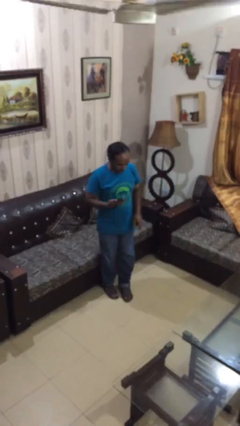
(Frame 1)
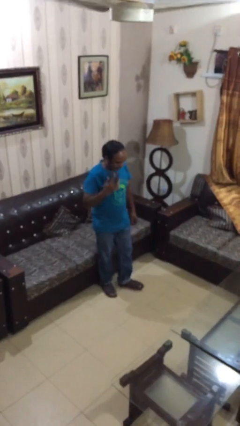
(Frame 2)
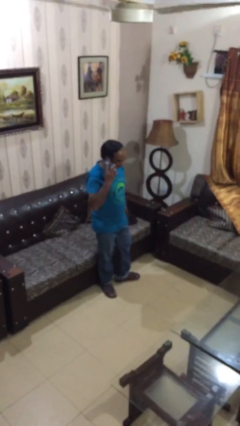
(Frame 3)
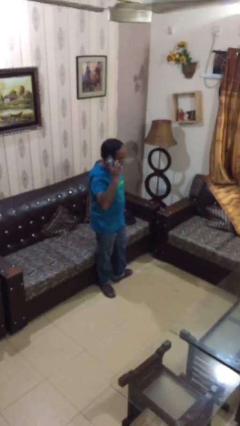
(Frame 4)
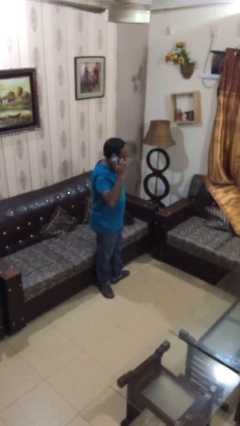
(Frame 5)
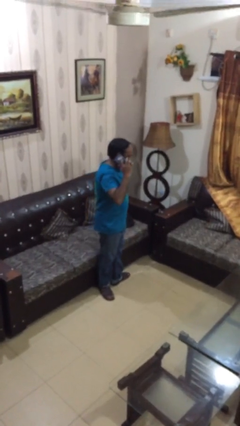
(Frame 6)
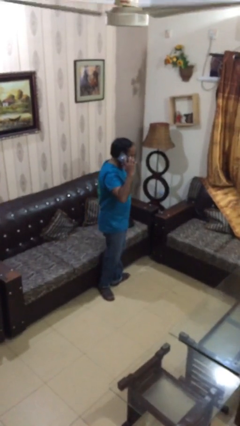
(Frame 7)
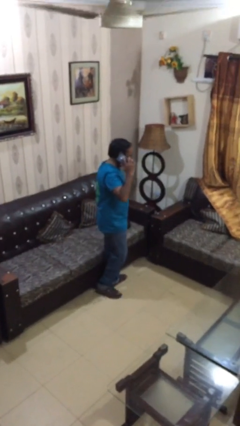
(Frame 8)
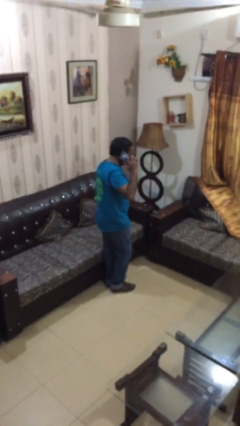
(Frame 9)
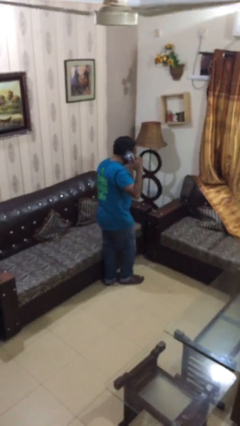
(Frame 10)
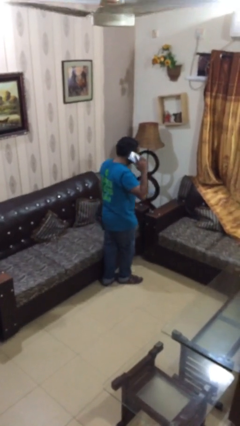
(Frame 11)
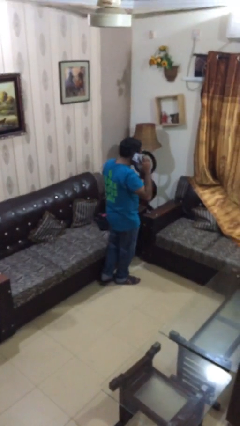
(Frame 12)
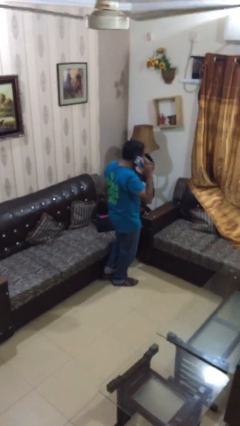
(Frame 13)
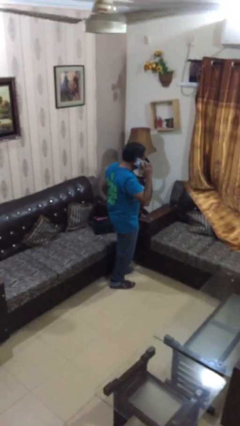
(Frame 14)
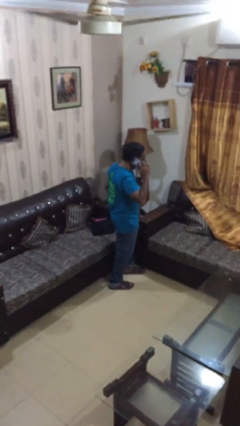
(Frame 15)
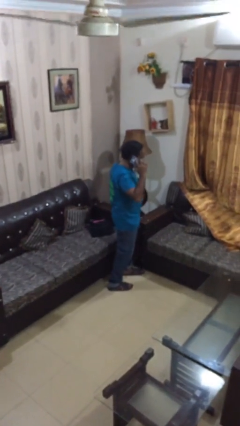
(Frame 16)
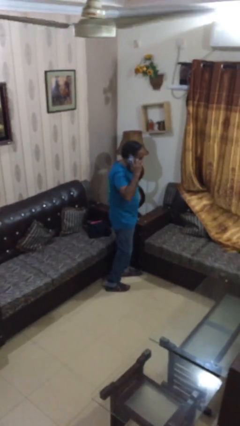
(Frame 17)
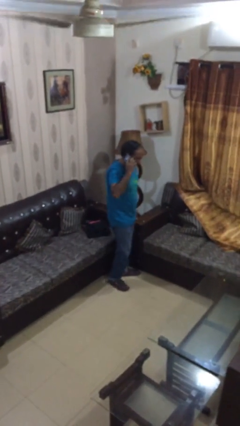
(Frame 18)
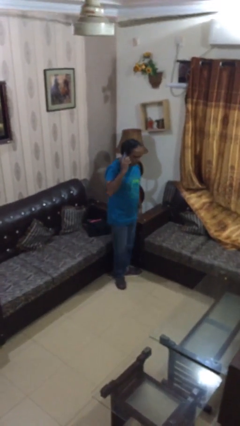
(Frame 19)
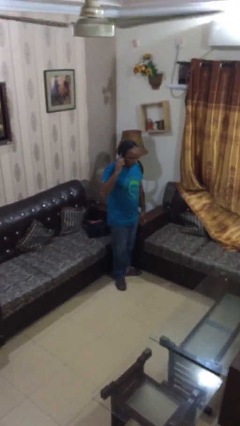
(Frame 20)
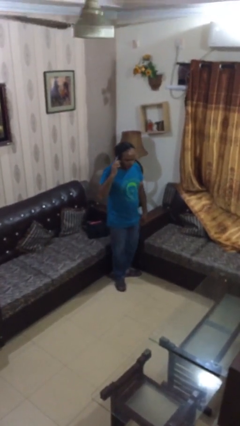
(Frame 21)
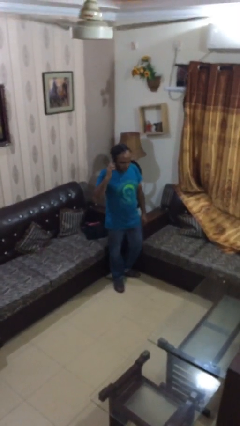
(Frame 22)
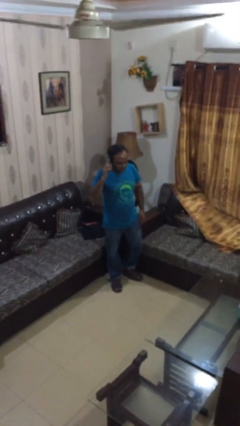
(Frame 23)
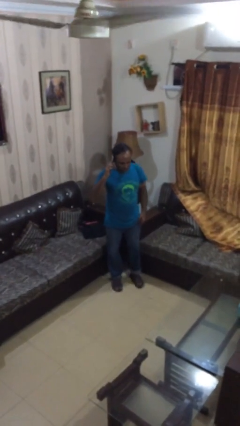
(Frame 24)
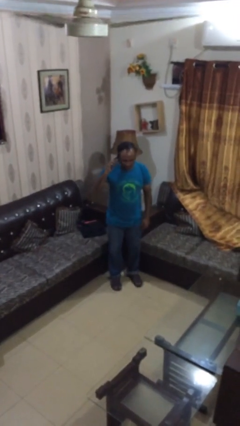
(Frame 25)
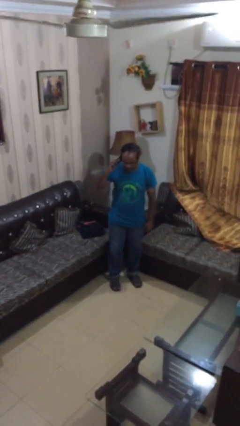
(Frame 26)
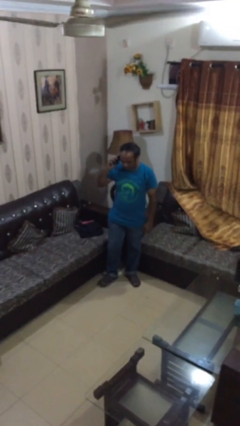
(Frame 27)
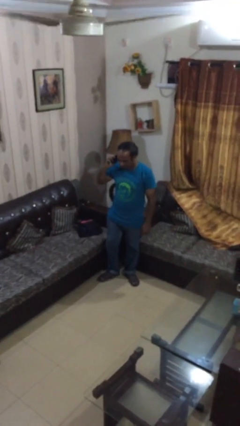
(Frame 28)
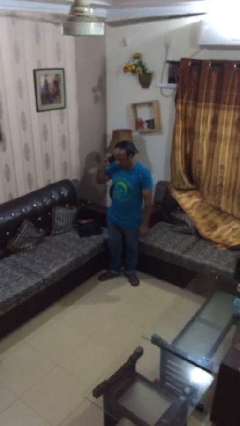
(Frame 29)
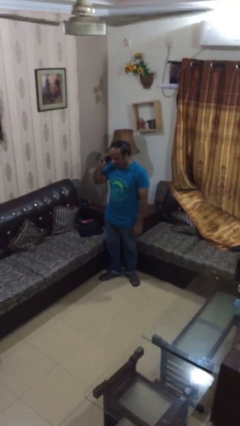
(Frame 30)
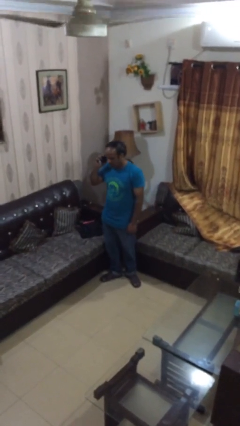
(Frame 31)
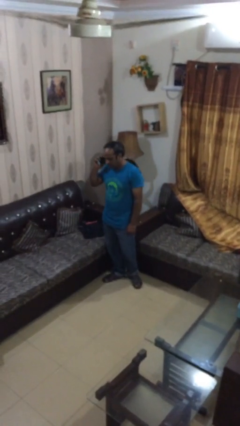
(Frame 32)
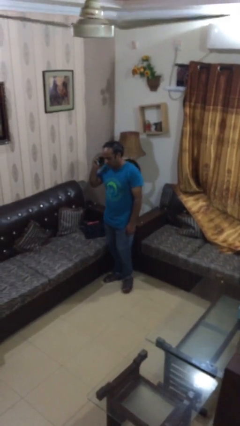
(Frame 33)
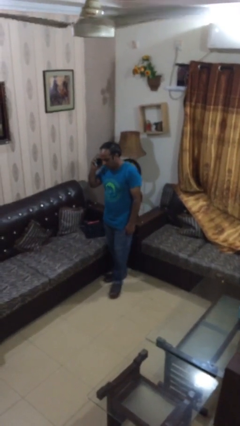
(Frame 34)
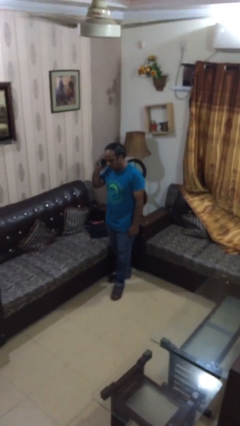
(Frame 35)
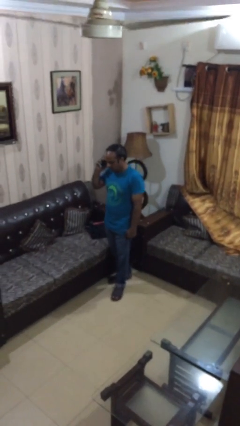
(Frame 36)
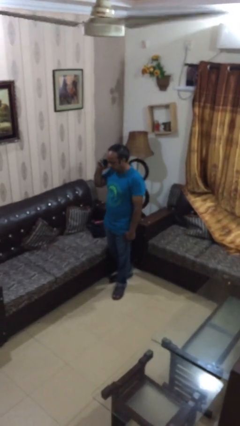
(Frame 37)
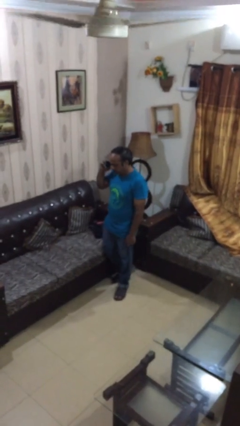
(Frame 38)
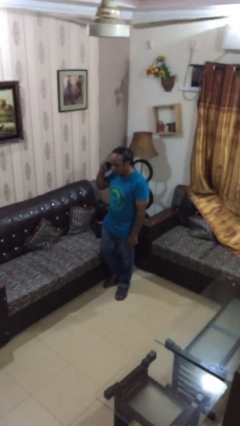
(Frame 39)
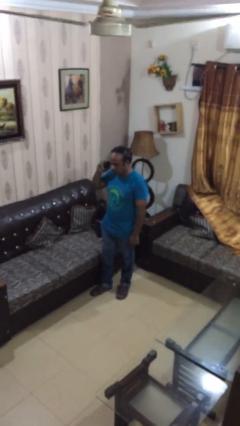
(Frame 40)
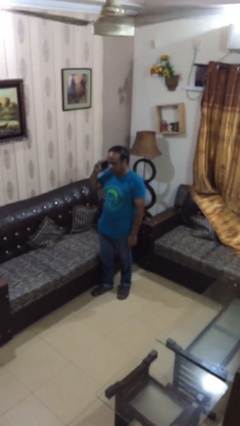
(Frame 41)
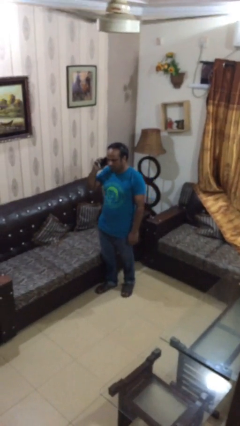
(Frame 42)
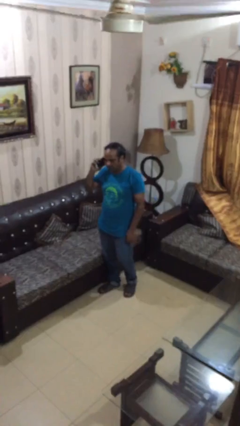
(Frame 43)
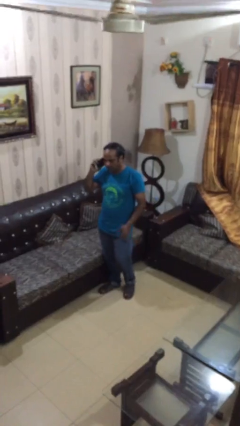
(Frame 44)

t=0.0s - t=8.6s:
person talks on phone

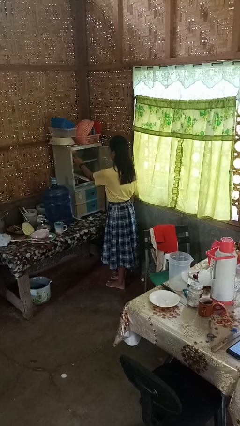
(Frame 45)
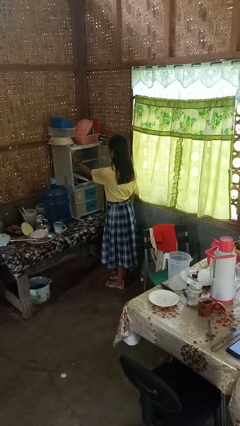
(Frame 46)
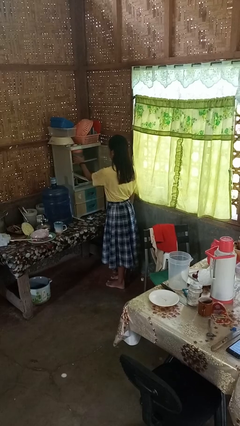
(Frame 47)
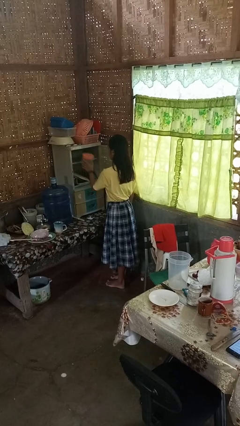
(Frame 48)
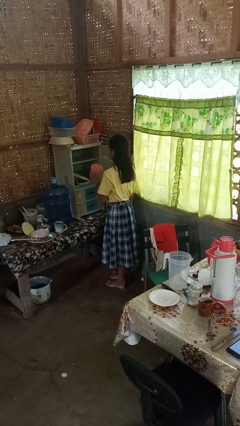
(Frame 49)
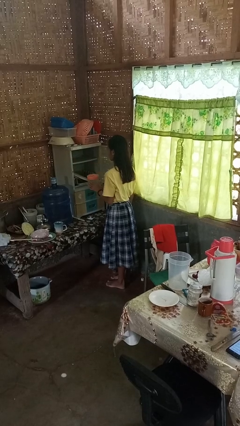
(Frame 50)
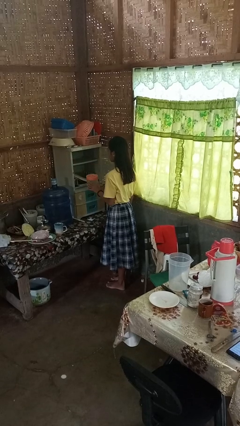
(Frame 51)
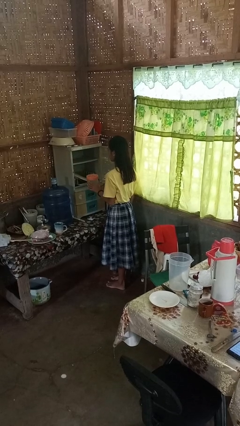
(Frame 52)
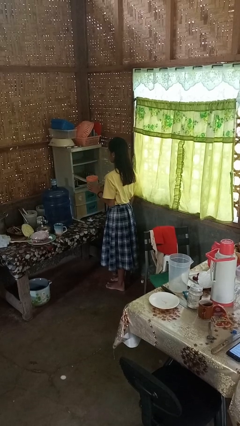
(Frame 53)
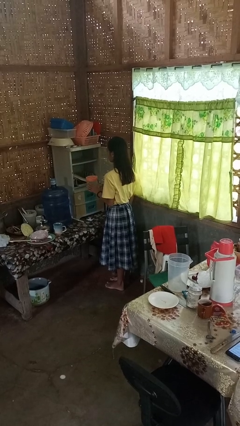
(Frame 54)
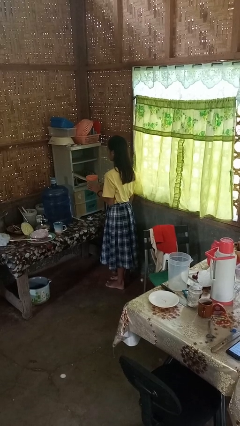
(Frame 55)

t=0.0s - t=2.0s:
person picks up object from cabinet

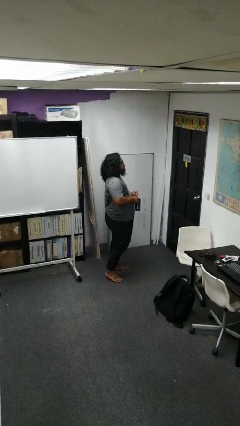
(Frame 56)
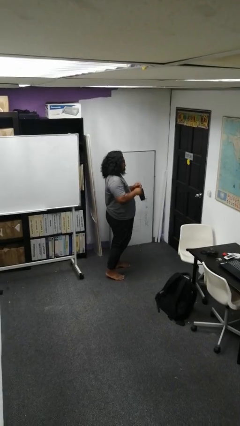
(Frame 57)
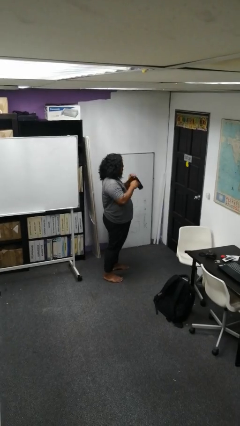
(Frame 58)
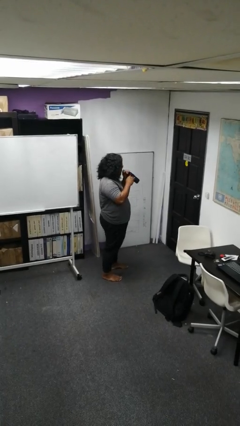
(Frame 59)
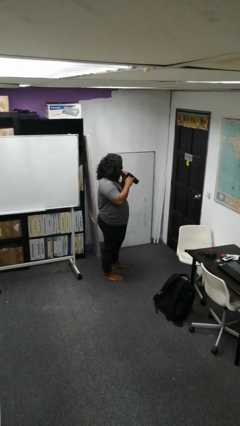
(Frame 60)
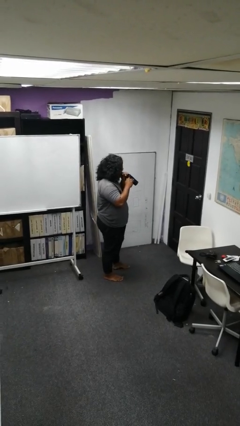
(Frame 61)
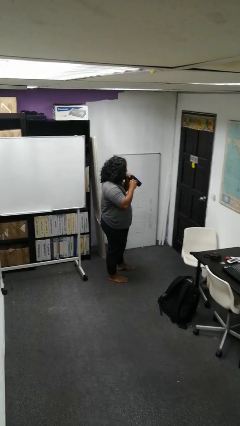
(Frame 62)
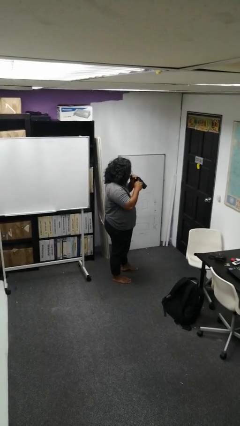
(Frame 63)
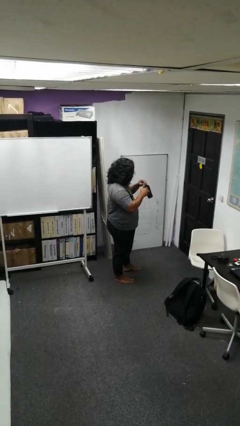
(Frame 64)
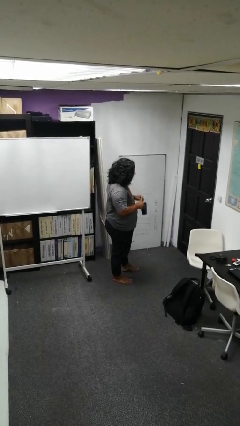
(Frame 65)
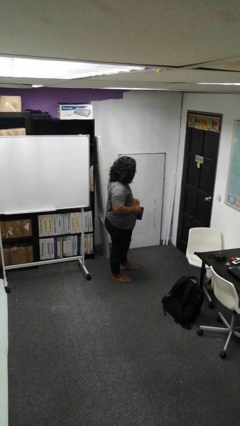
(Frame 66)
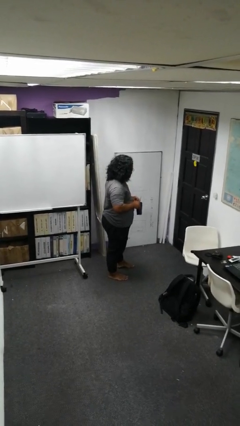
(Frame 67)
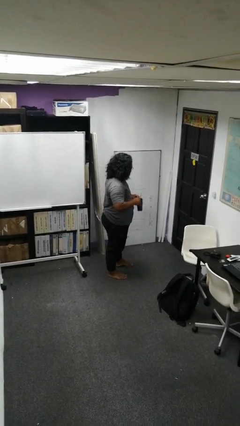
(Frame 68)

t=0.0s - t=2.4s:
person drinks from straw

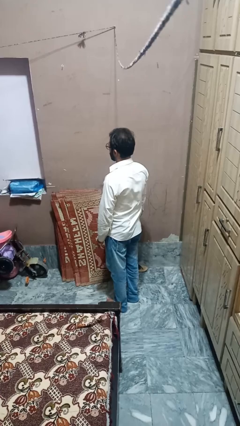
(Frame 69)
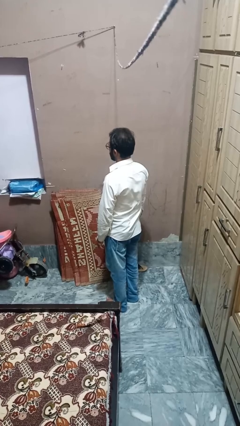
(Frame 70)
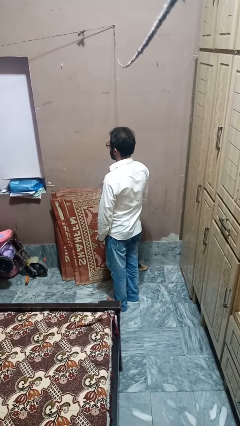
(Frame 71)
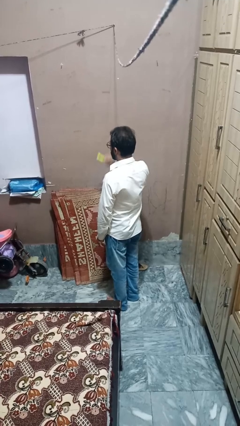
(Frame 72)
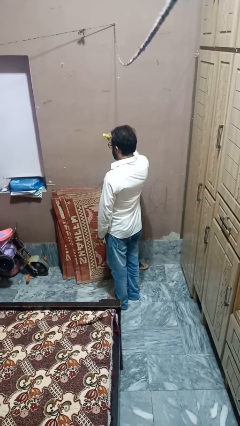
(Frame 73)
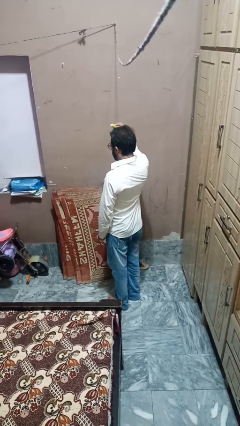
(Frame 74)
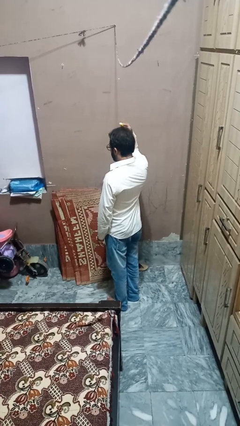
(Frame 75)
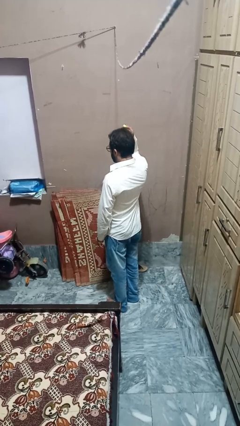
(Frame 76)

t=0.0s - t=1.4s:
person brushes hair

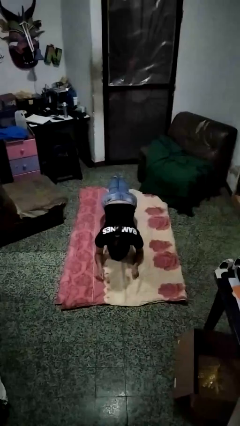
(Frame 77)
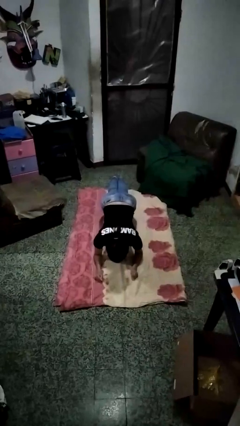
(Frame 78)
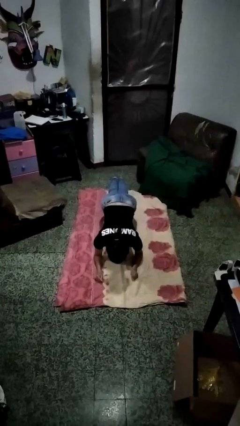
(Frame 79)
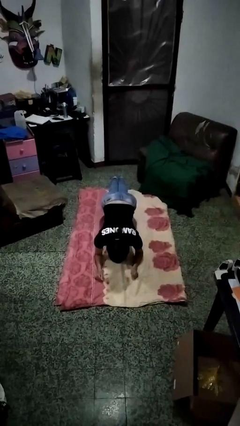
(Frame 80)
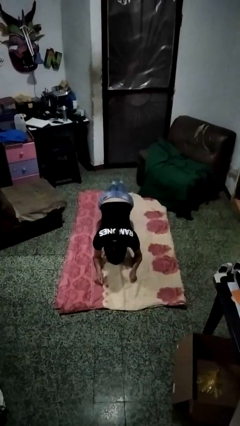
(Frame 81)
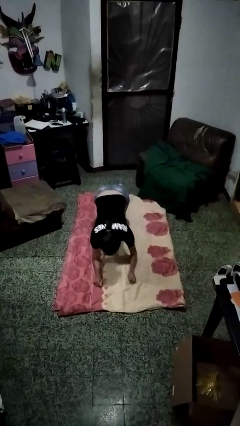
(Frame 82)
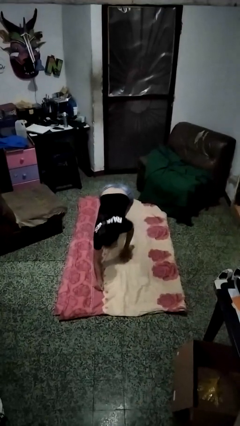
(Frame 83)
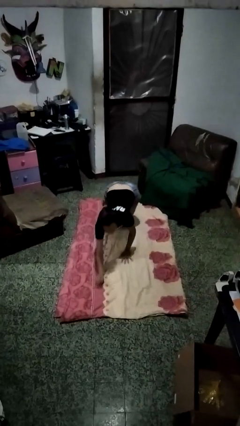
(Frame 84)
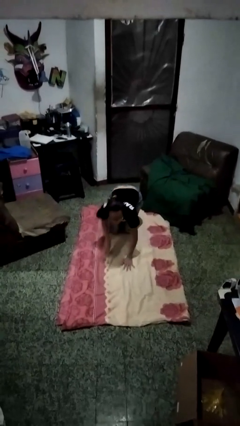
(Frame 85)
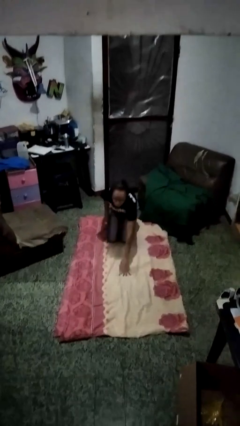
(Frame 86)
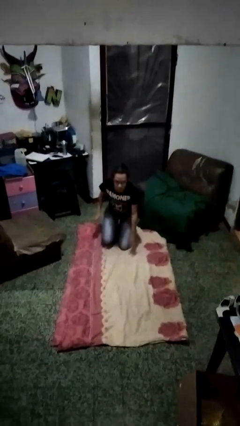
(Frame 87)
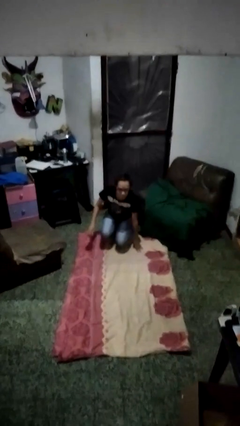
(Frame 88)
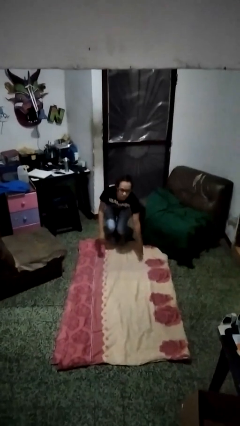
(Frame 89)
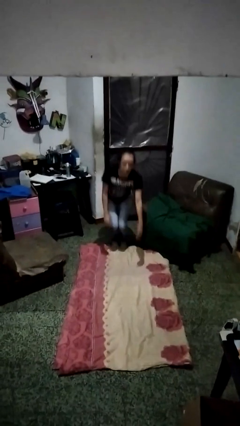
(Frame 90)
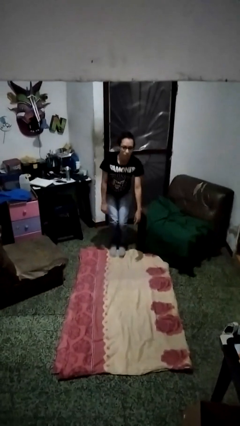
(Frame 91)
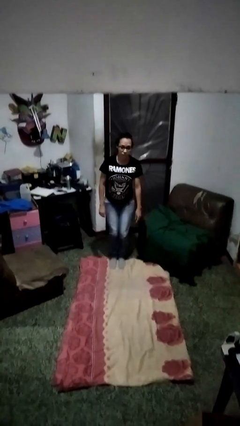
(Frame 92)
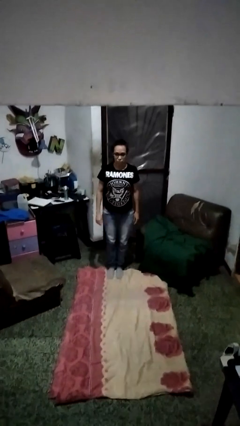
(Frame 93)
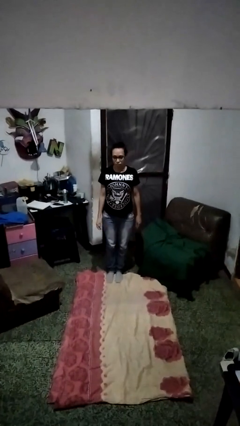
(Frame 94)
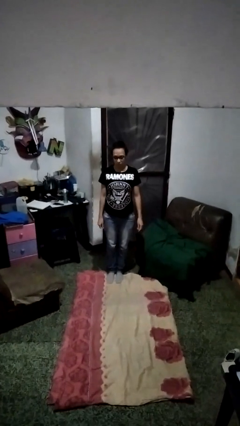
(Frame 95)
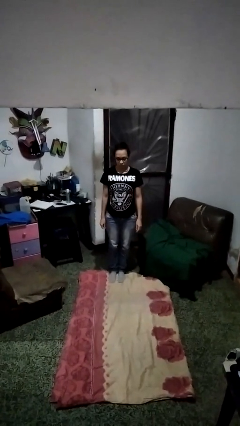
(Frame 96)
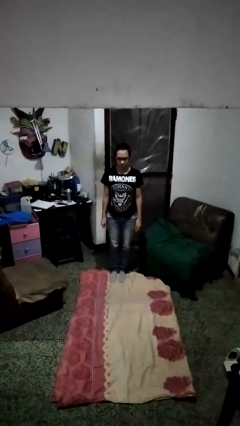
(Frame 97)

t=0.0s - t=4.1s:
person stands up from floor
